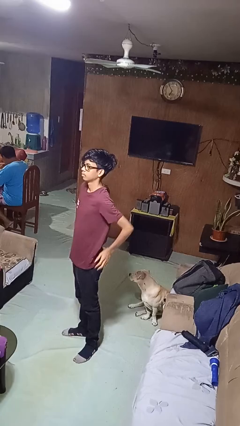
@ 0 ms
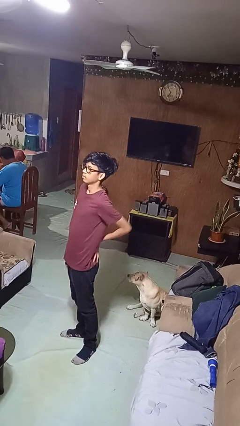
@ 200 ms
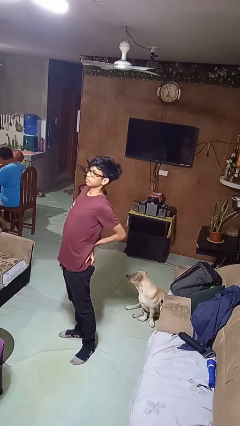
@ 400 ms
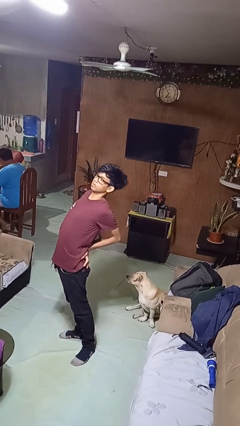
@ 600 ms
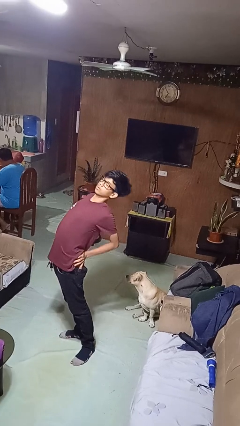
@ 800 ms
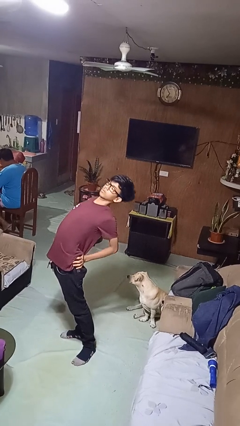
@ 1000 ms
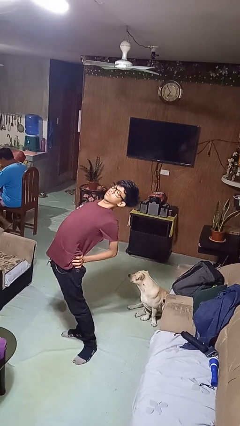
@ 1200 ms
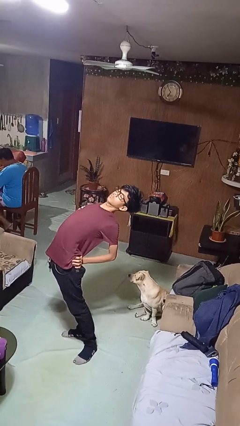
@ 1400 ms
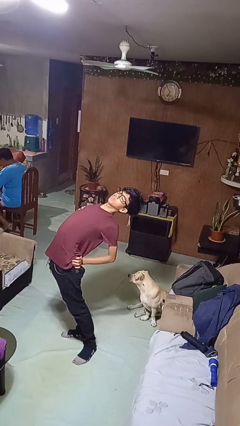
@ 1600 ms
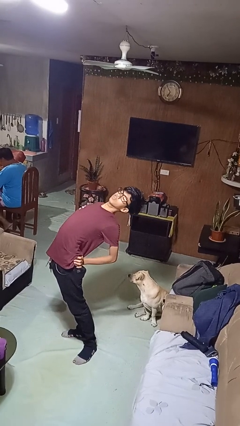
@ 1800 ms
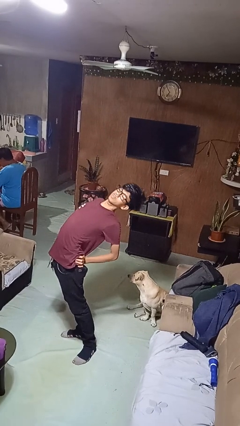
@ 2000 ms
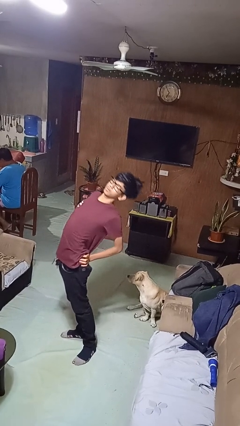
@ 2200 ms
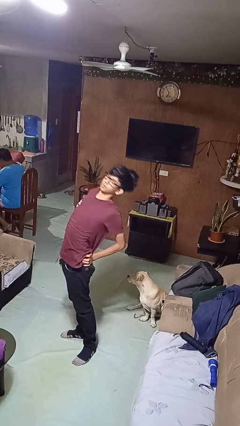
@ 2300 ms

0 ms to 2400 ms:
person stretches back

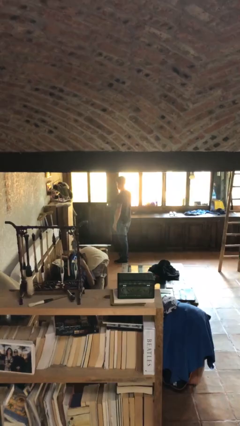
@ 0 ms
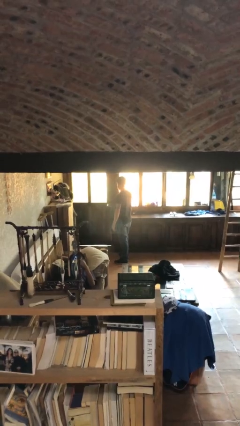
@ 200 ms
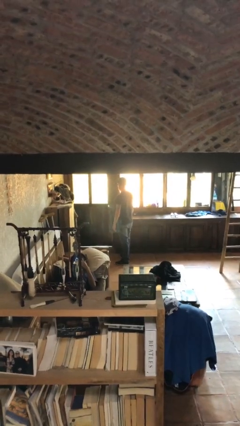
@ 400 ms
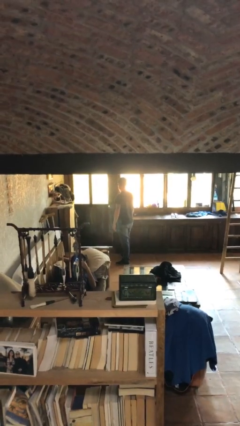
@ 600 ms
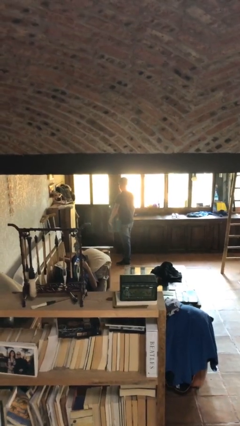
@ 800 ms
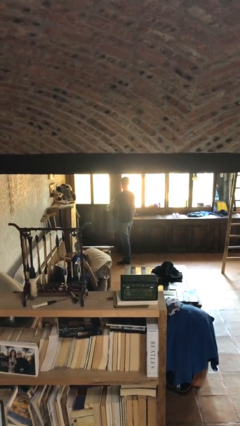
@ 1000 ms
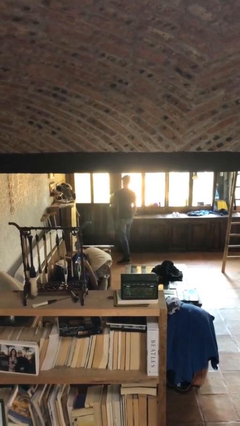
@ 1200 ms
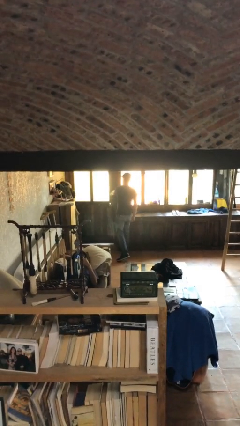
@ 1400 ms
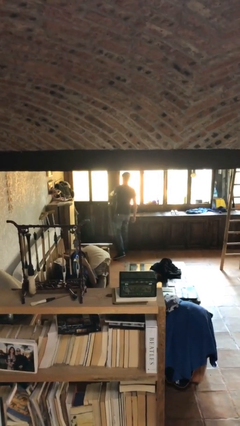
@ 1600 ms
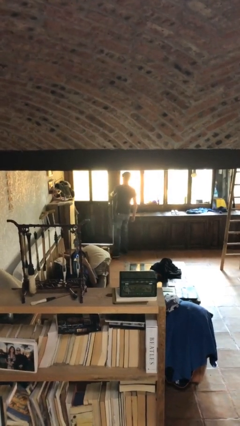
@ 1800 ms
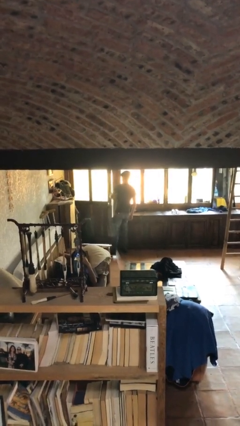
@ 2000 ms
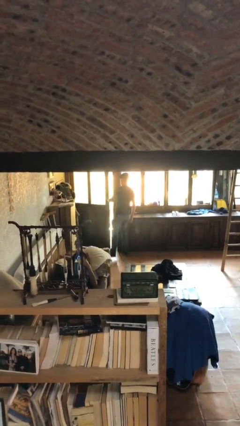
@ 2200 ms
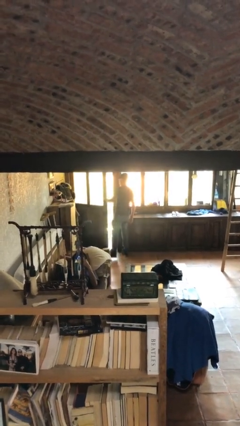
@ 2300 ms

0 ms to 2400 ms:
person opens facility door

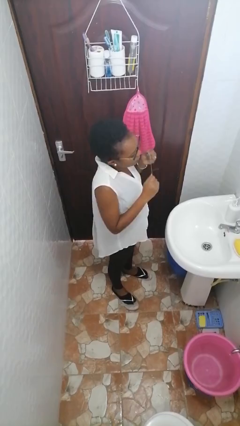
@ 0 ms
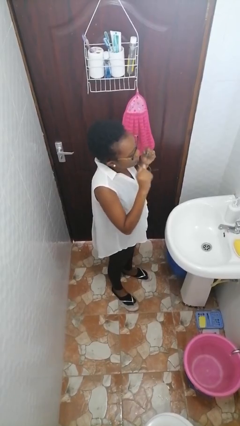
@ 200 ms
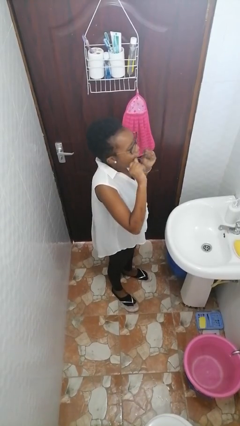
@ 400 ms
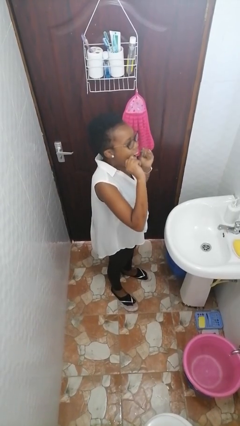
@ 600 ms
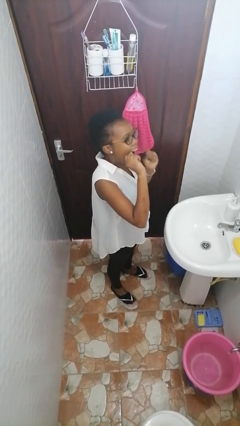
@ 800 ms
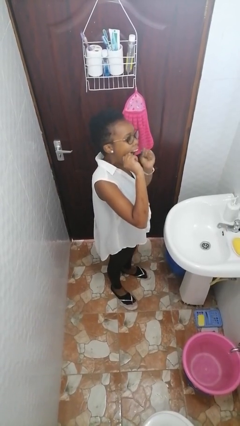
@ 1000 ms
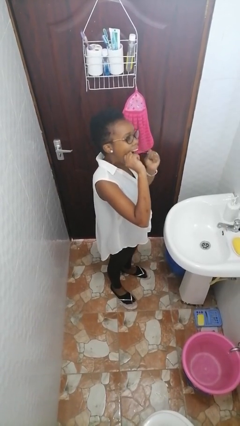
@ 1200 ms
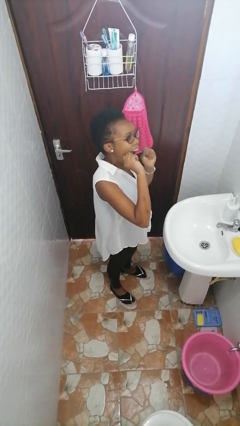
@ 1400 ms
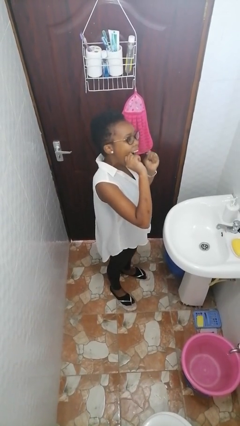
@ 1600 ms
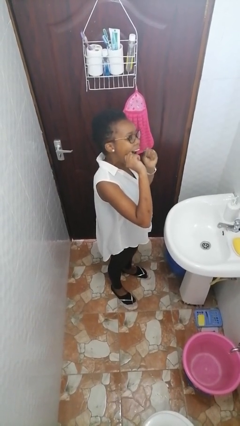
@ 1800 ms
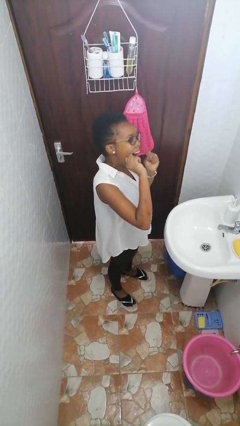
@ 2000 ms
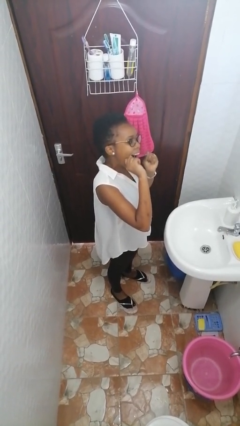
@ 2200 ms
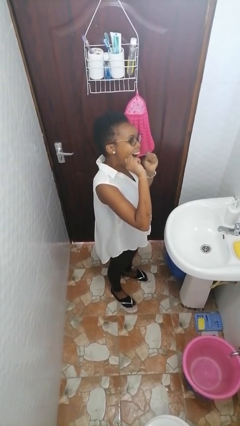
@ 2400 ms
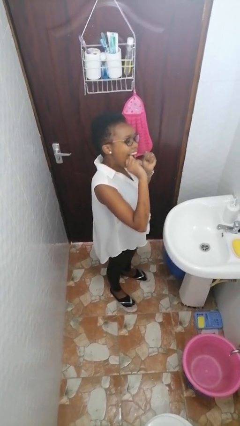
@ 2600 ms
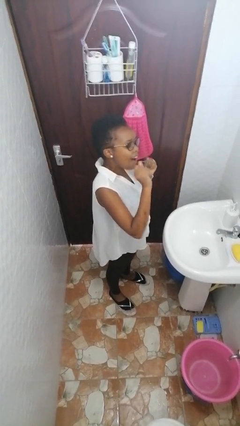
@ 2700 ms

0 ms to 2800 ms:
person flosses

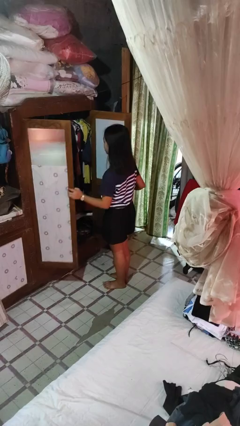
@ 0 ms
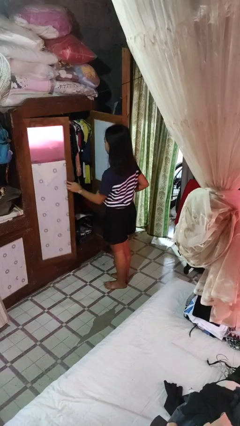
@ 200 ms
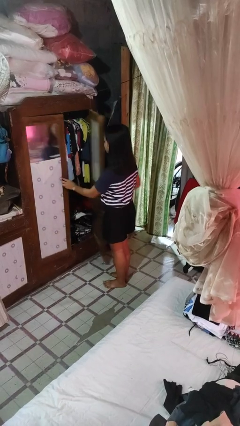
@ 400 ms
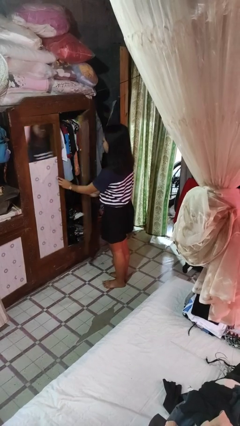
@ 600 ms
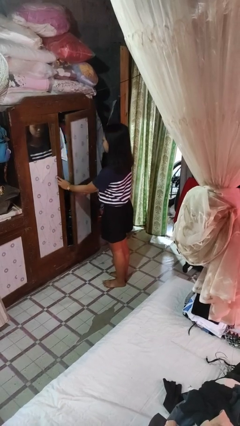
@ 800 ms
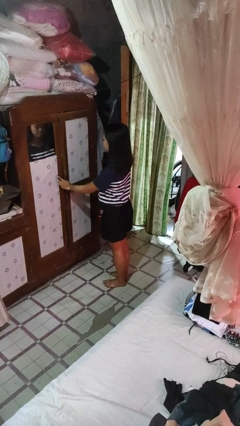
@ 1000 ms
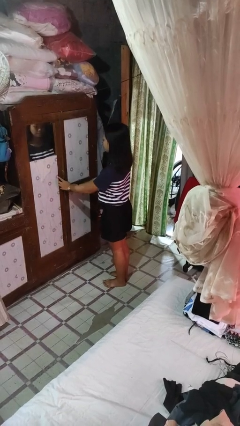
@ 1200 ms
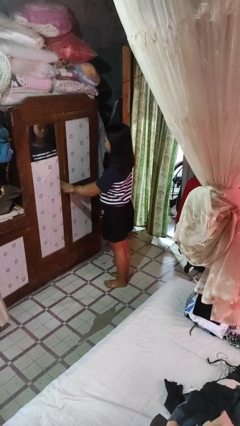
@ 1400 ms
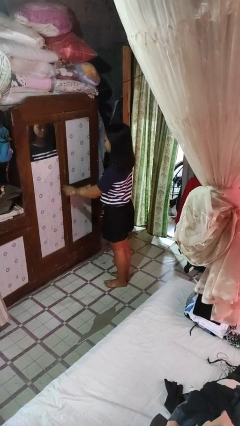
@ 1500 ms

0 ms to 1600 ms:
person closes closet door

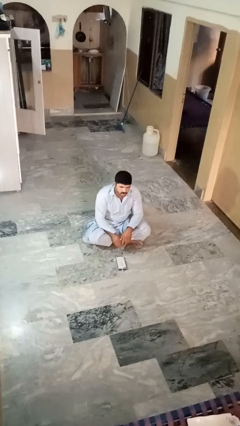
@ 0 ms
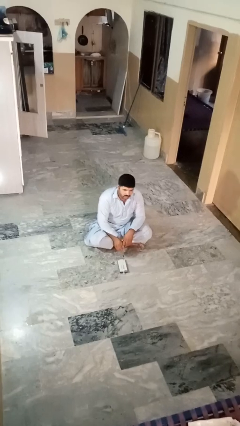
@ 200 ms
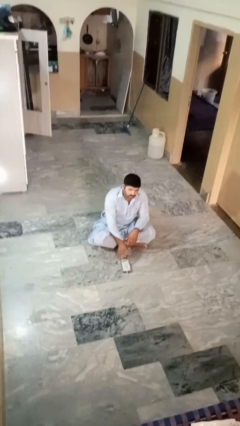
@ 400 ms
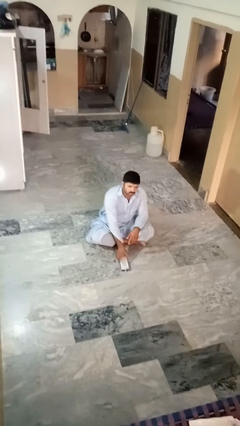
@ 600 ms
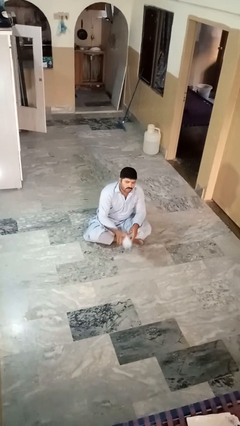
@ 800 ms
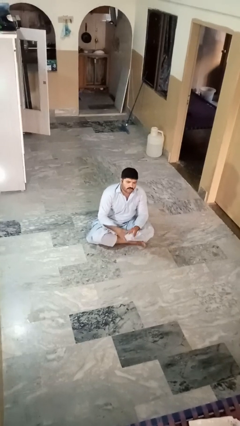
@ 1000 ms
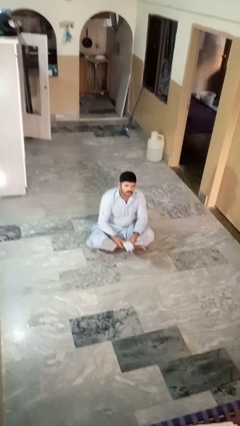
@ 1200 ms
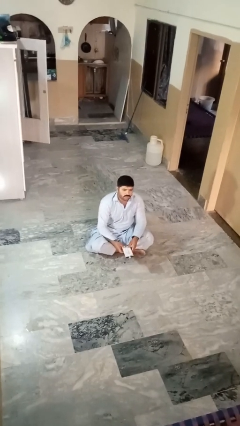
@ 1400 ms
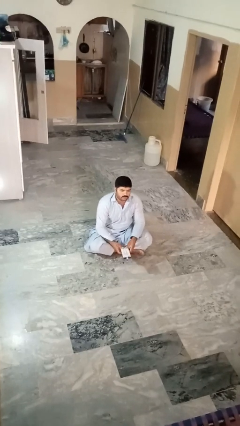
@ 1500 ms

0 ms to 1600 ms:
person picks up object from floor

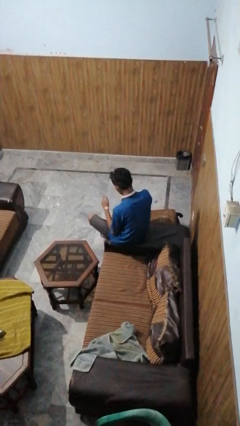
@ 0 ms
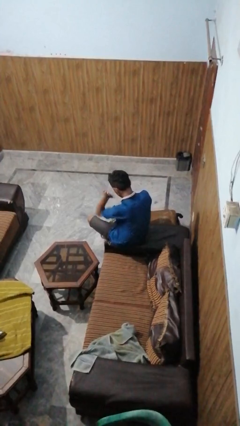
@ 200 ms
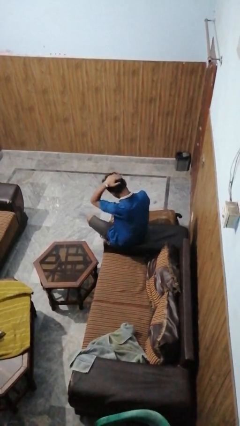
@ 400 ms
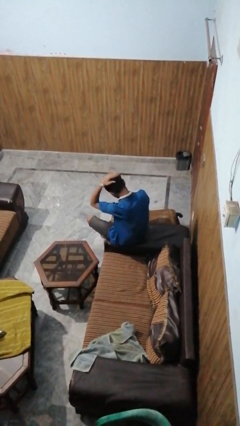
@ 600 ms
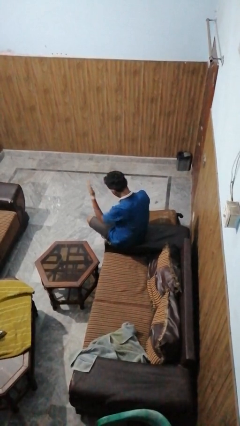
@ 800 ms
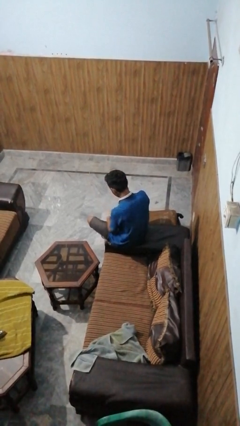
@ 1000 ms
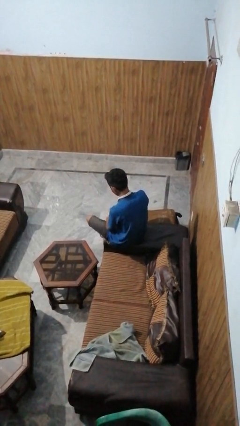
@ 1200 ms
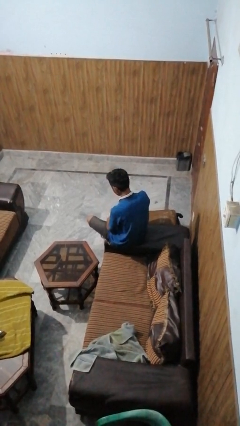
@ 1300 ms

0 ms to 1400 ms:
person swats bug

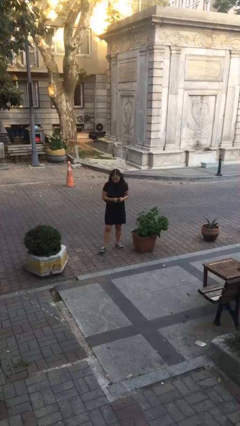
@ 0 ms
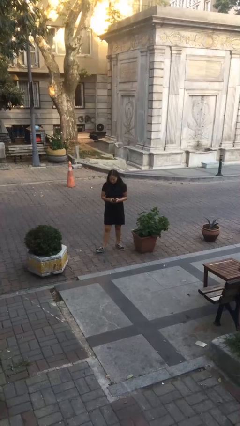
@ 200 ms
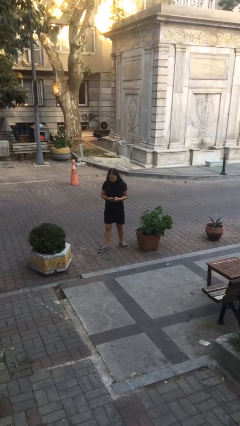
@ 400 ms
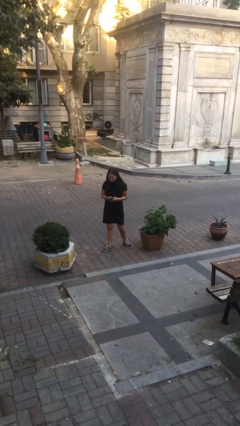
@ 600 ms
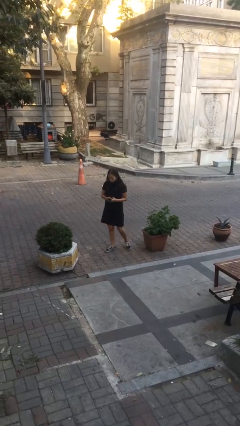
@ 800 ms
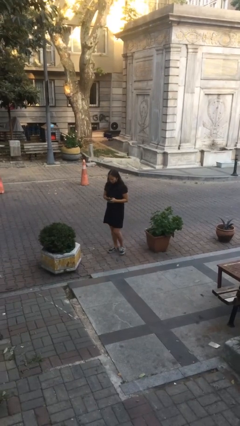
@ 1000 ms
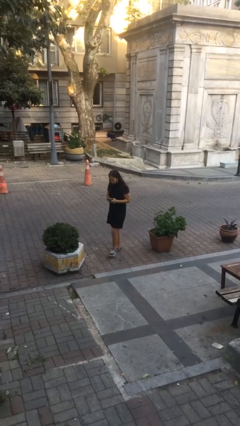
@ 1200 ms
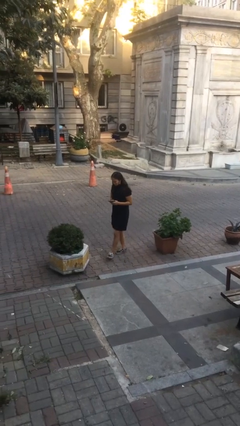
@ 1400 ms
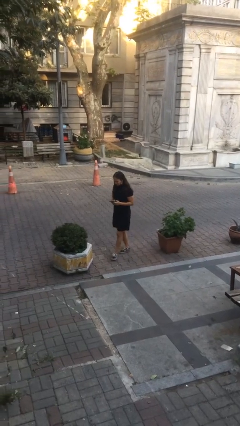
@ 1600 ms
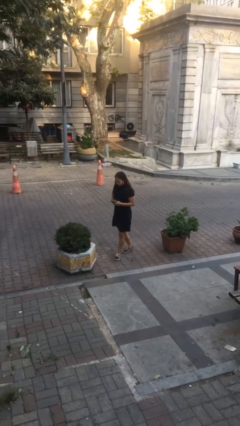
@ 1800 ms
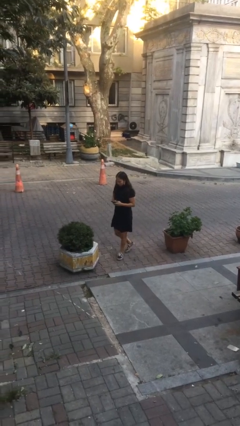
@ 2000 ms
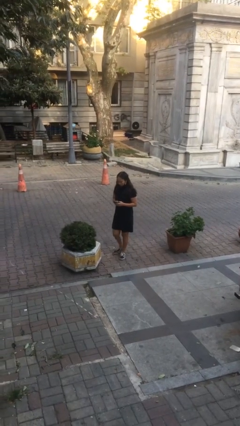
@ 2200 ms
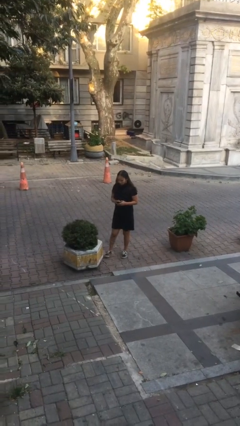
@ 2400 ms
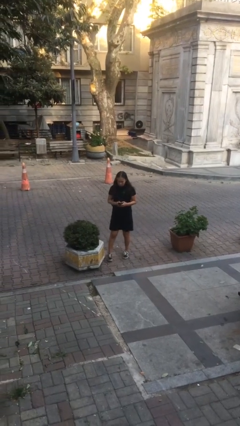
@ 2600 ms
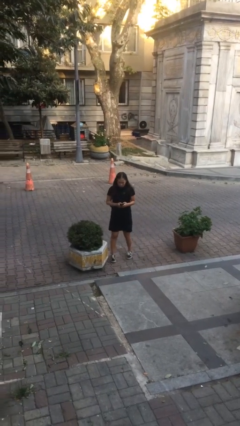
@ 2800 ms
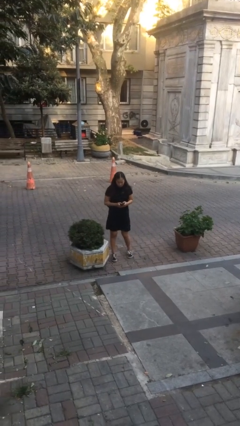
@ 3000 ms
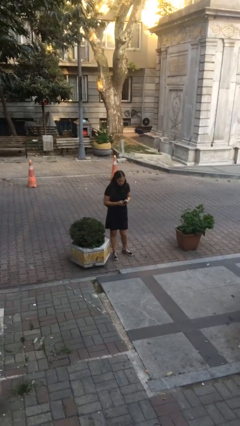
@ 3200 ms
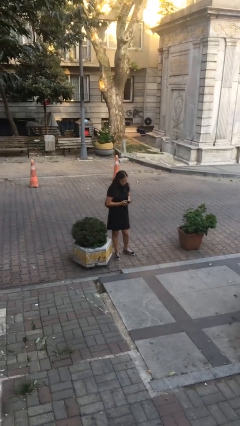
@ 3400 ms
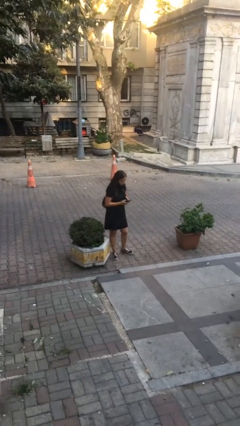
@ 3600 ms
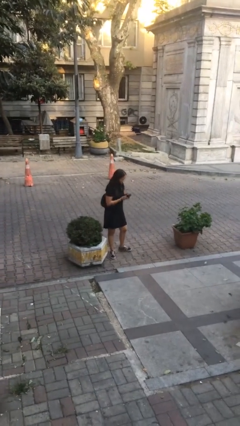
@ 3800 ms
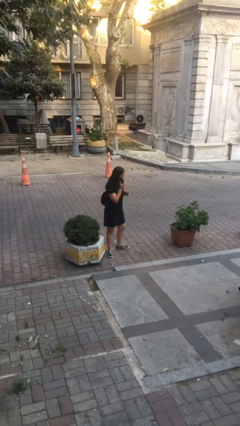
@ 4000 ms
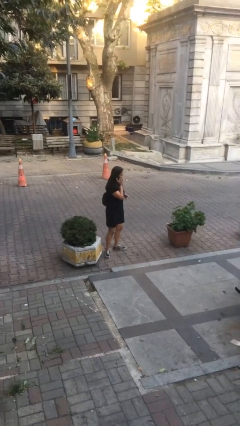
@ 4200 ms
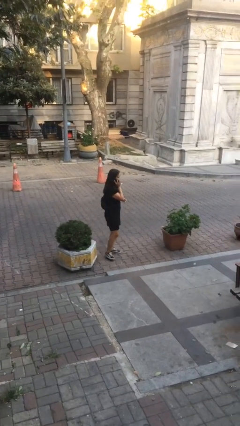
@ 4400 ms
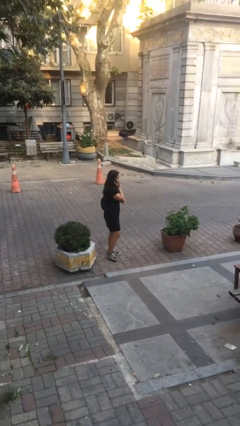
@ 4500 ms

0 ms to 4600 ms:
person texts on phone
